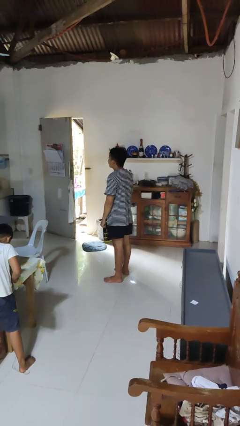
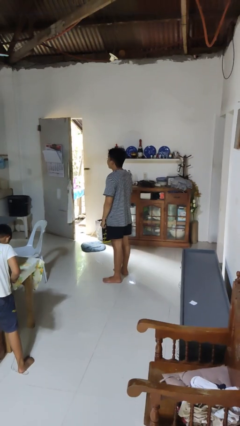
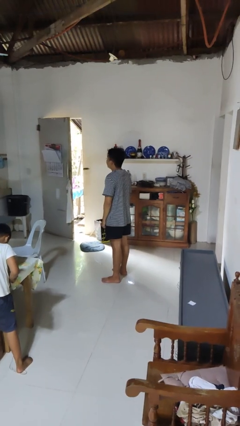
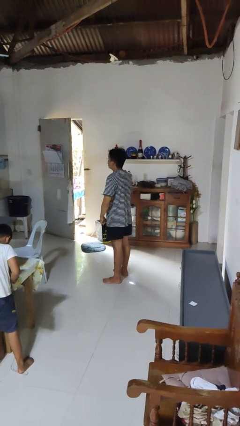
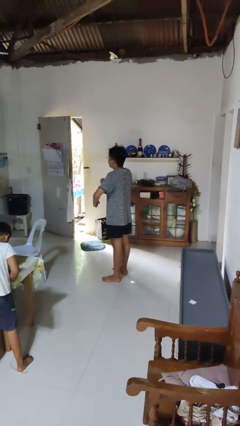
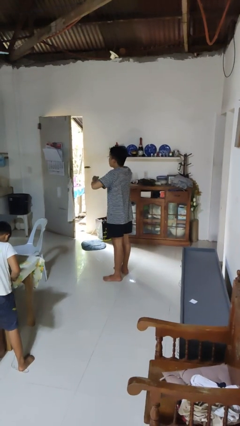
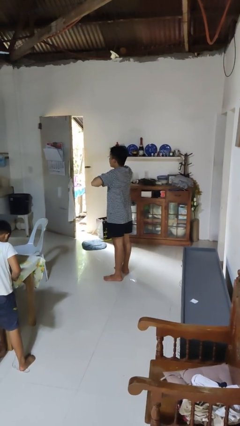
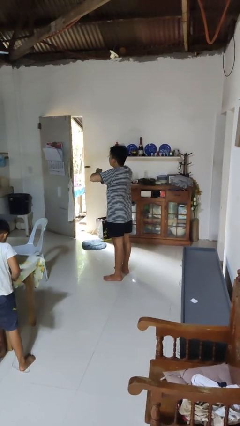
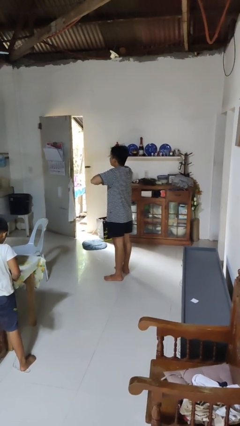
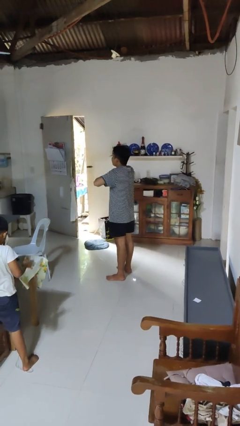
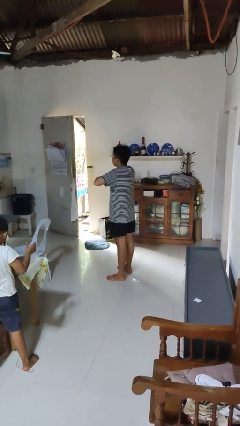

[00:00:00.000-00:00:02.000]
person drums on chest

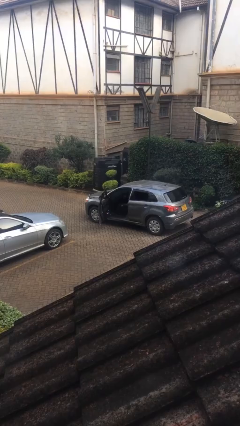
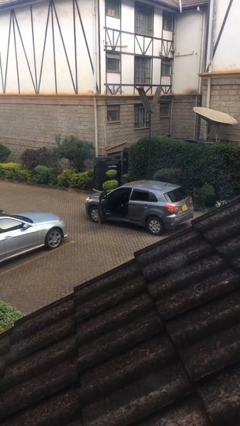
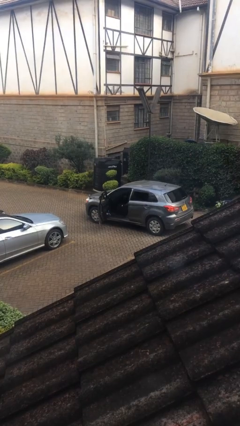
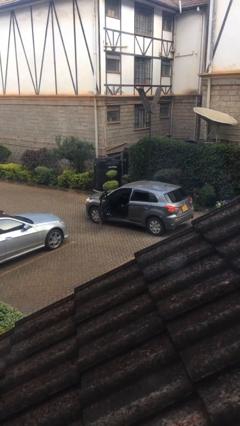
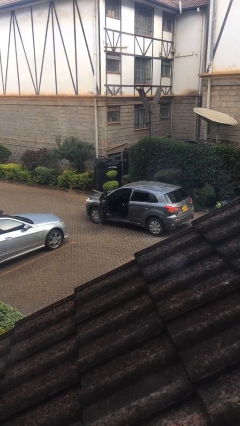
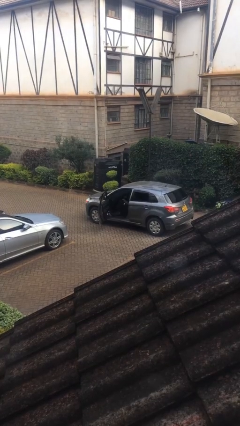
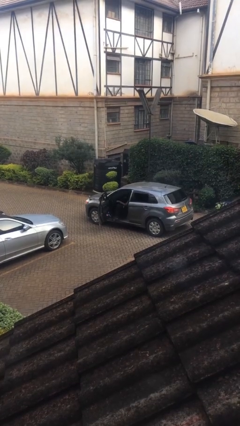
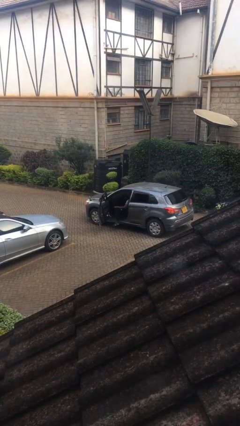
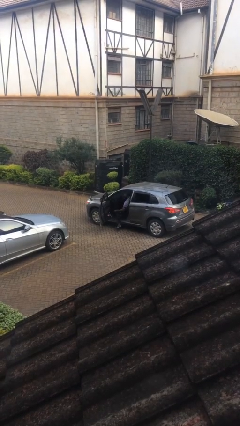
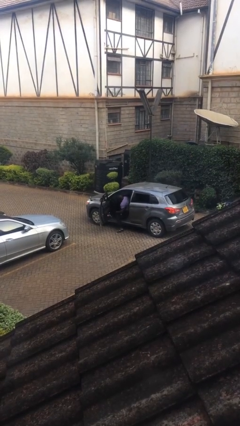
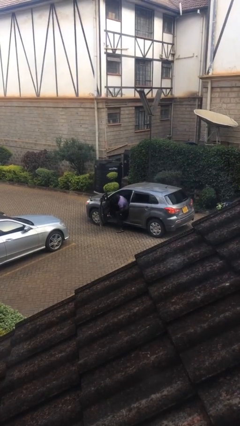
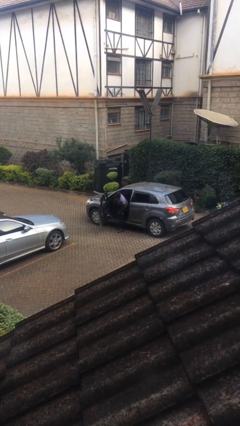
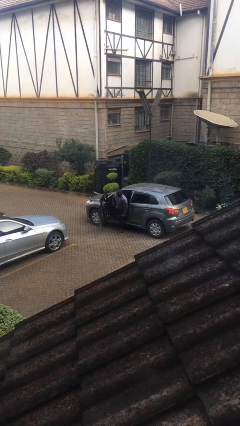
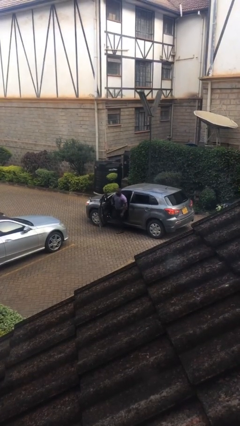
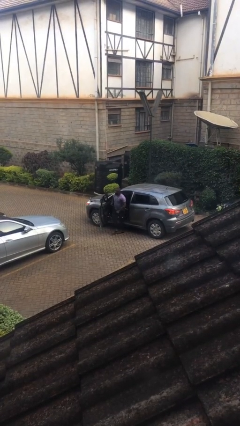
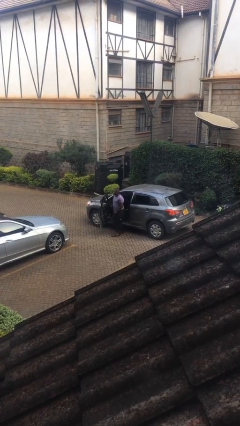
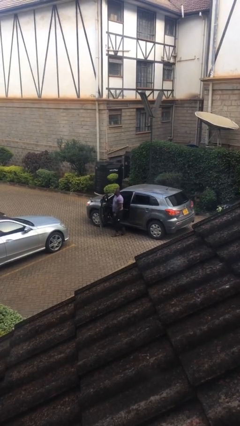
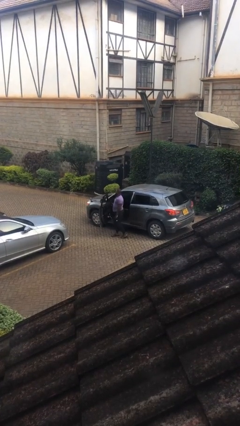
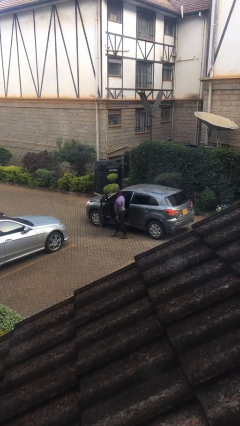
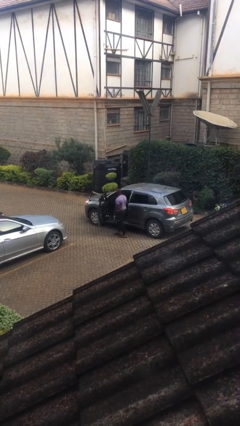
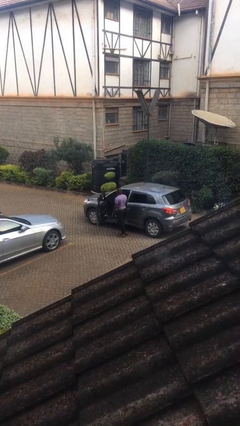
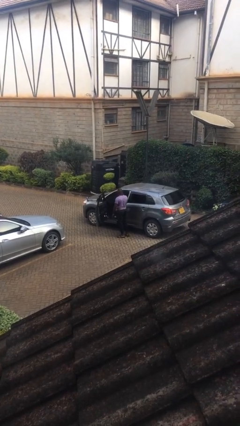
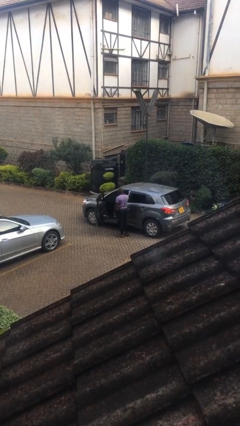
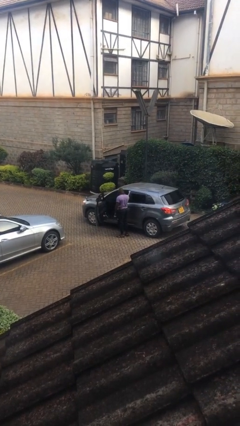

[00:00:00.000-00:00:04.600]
person exits car

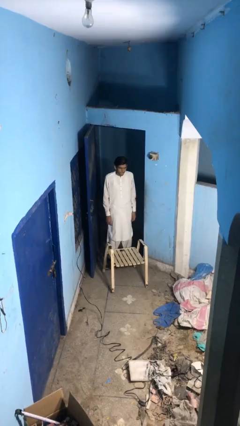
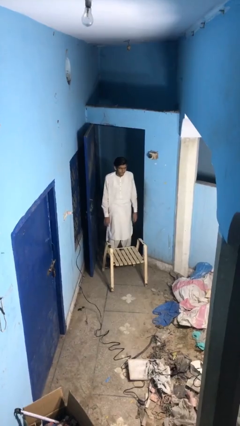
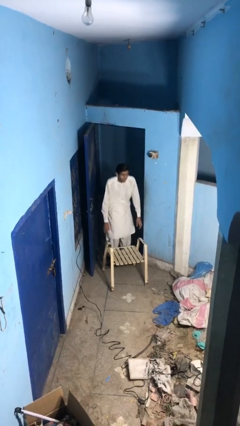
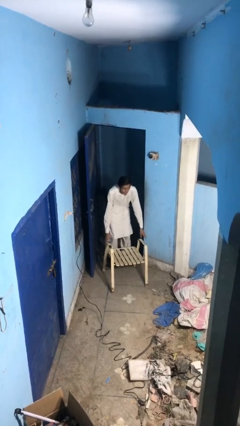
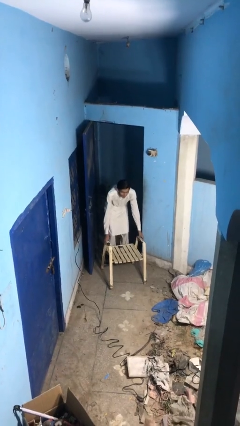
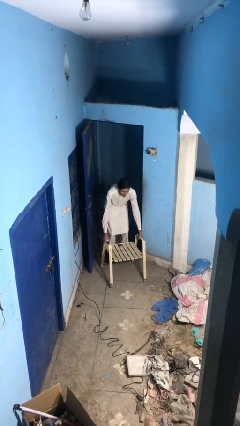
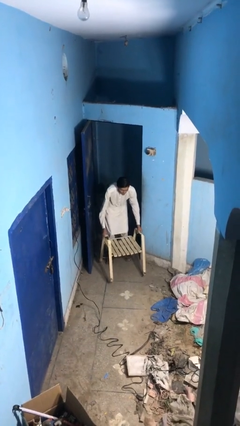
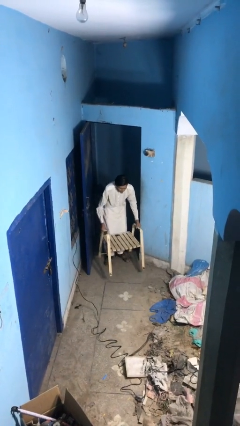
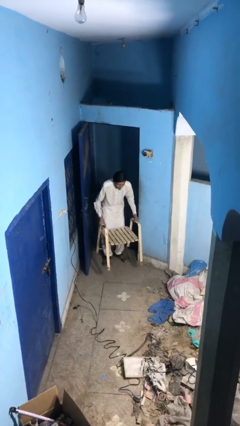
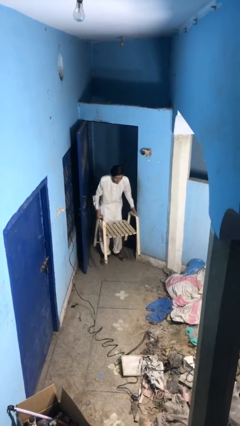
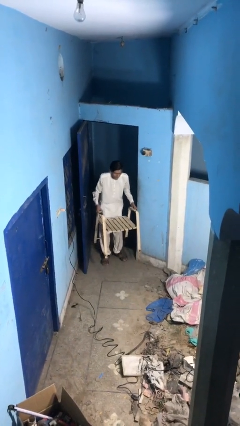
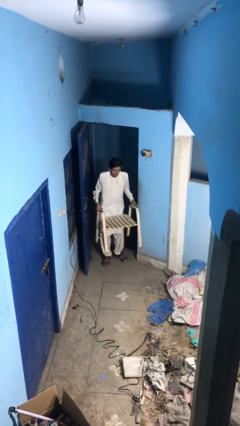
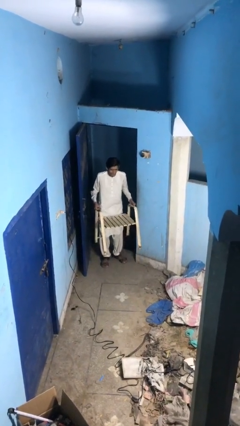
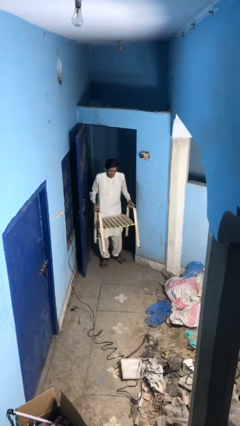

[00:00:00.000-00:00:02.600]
person picks up object from floor

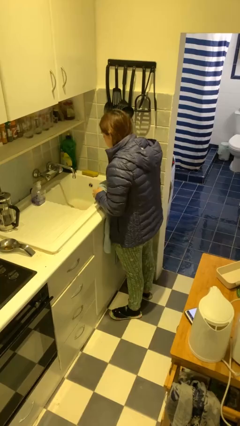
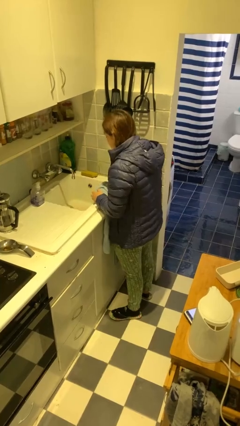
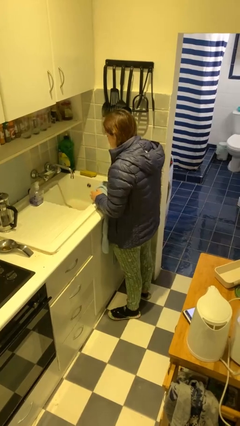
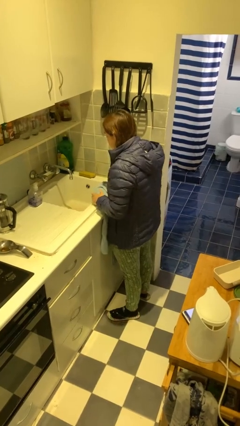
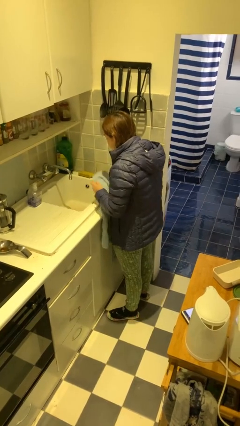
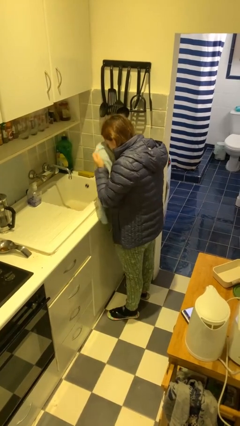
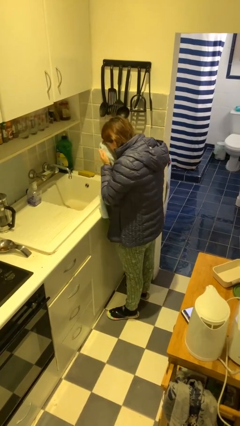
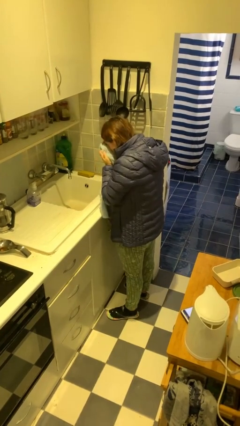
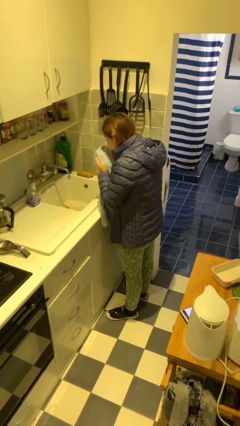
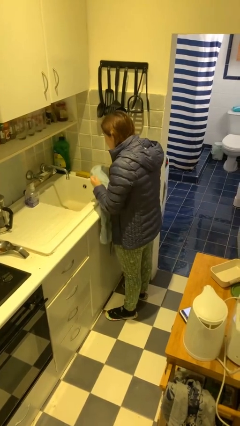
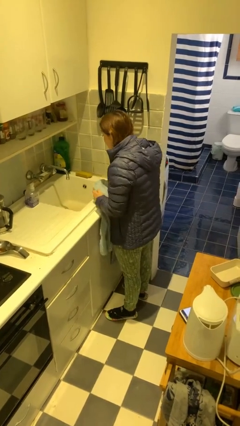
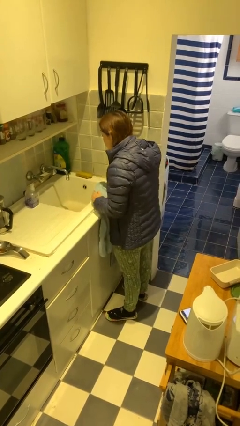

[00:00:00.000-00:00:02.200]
person dries face with towel

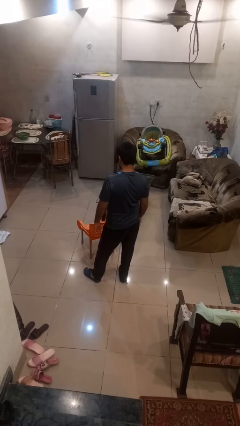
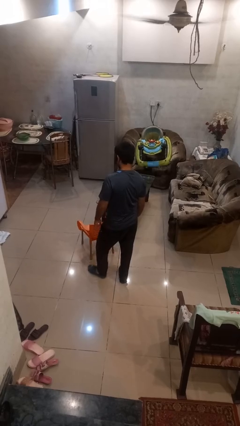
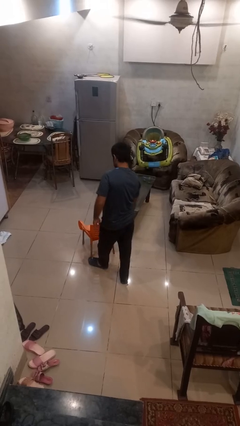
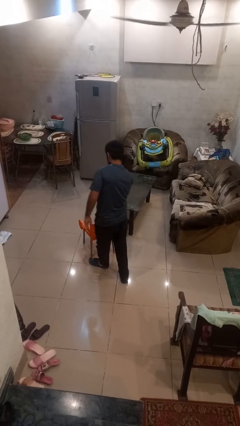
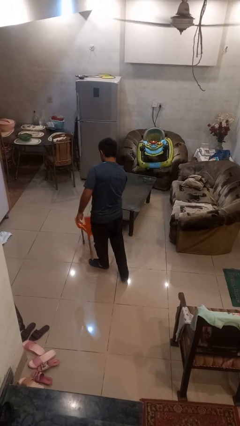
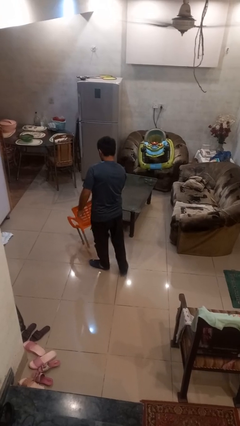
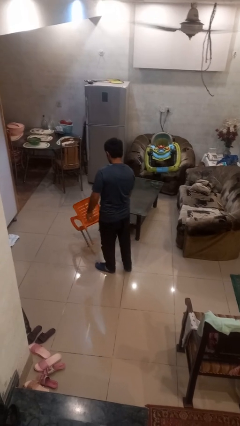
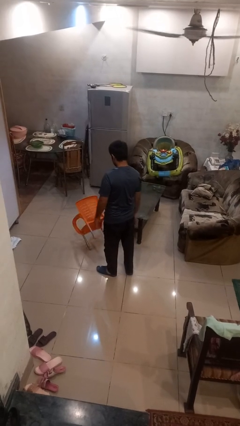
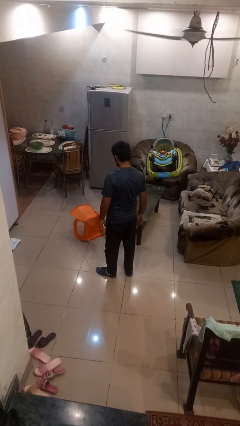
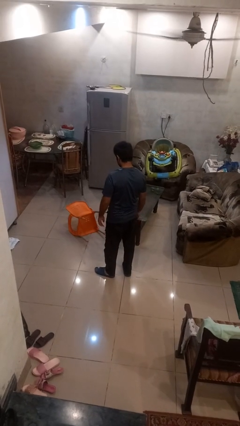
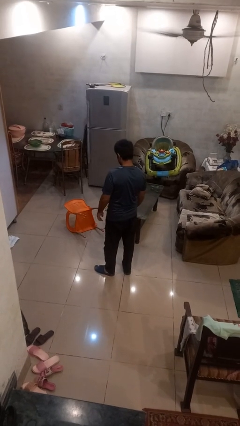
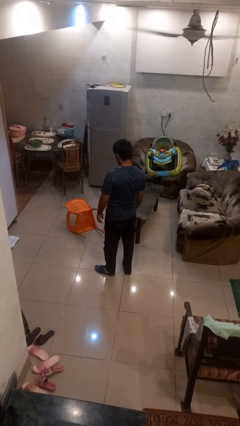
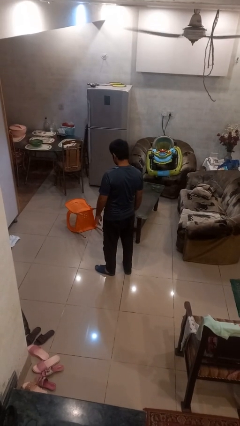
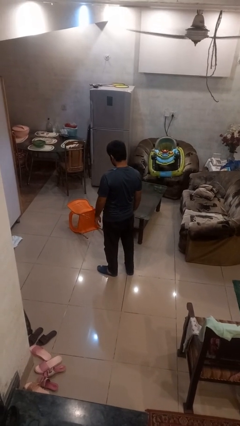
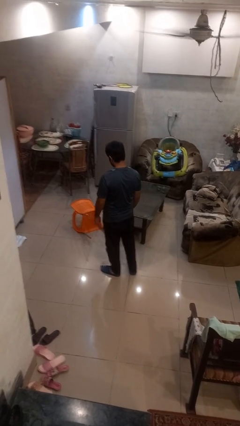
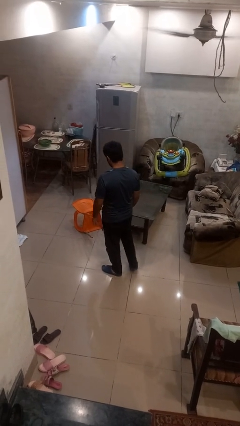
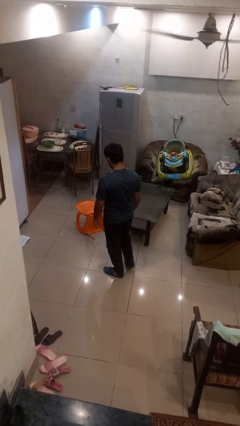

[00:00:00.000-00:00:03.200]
person knocks over furniture

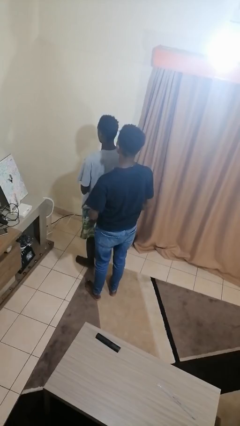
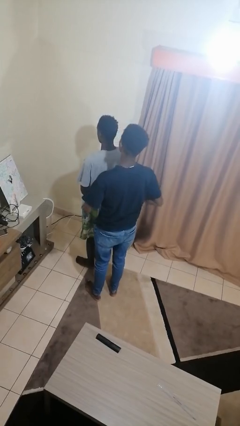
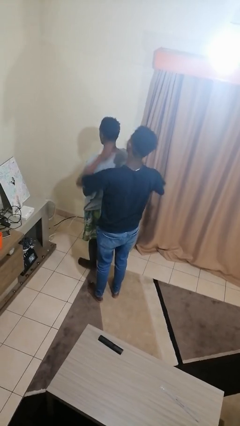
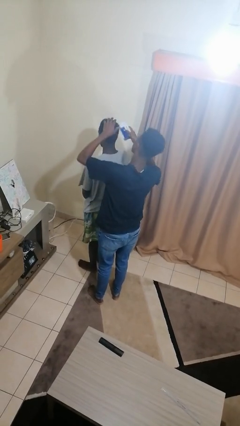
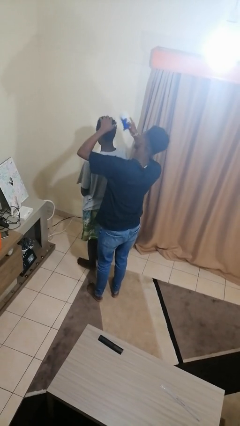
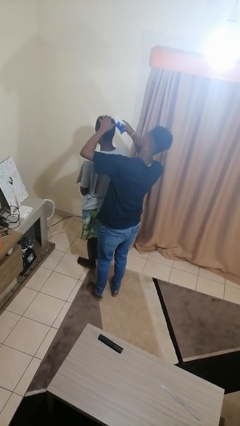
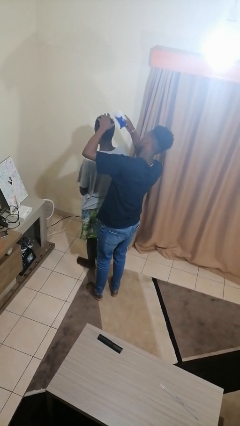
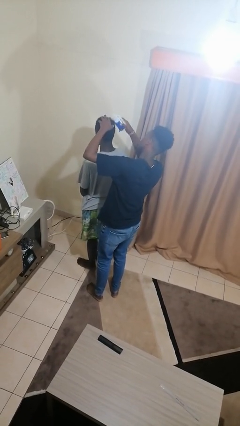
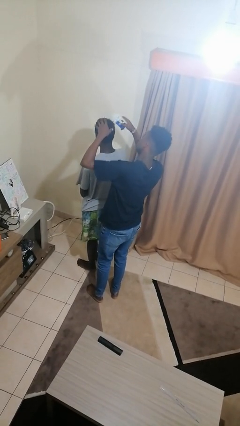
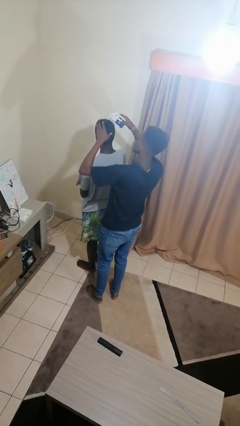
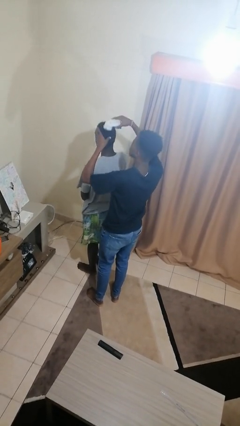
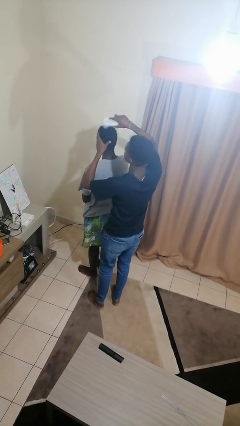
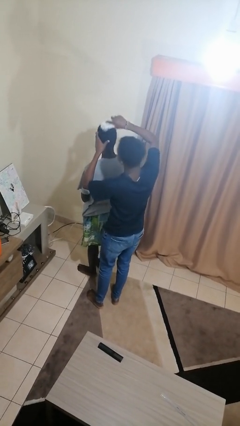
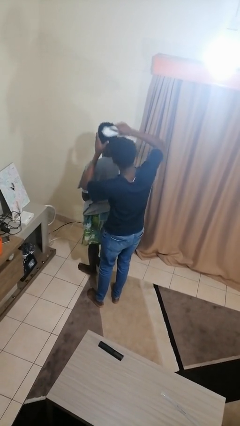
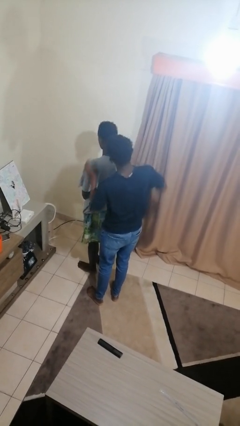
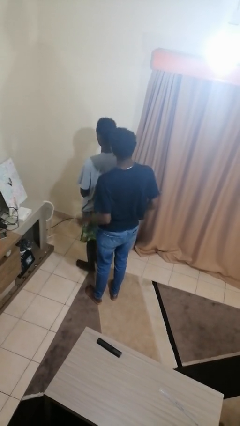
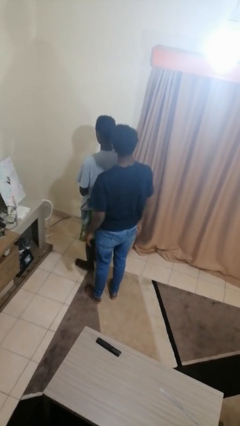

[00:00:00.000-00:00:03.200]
person brushes hair of person
